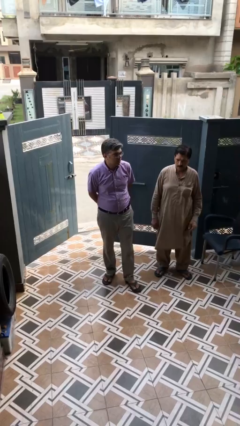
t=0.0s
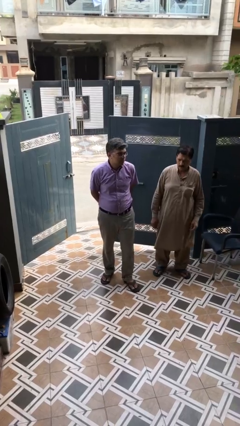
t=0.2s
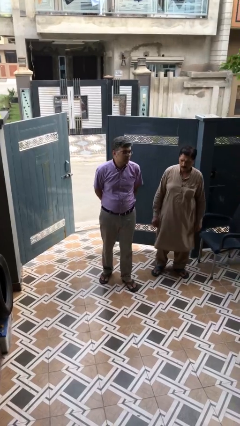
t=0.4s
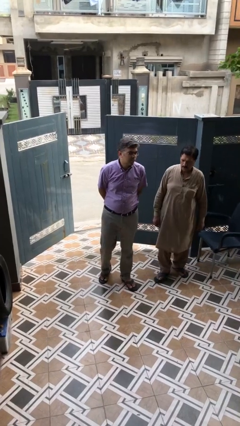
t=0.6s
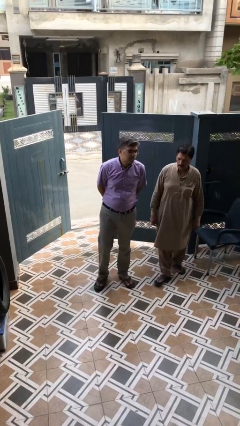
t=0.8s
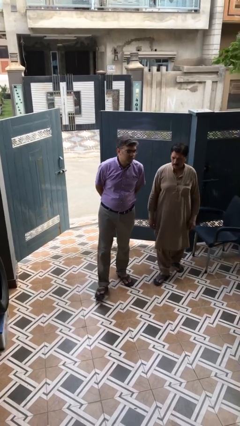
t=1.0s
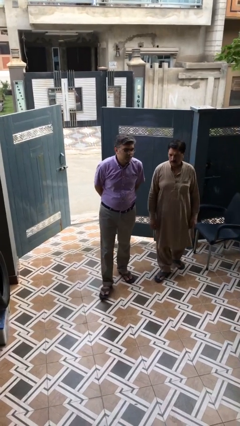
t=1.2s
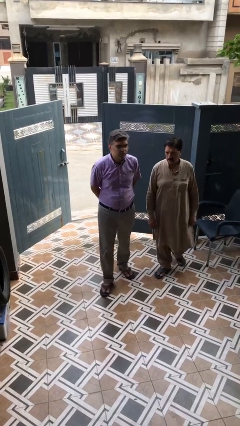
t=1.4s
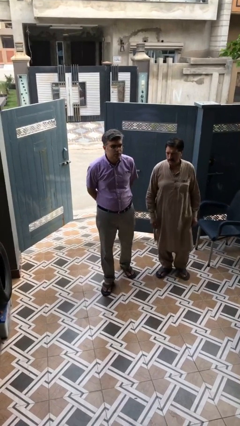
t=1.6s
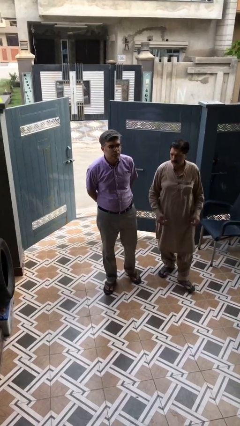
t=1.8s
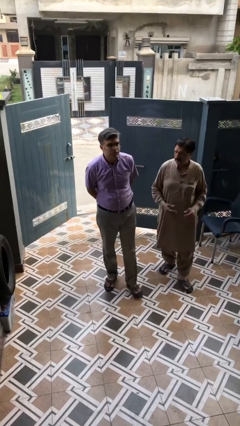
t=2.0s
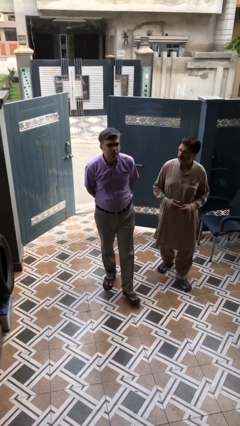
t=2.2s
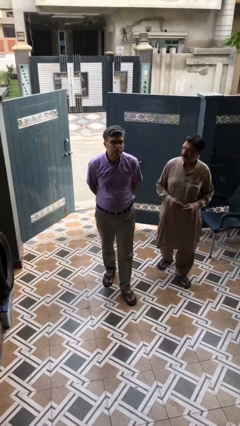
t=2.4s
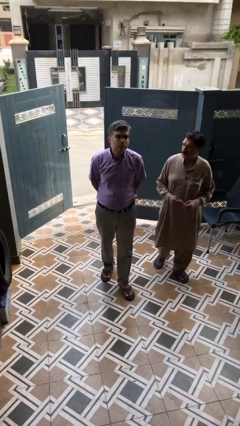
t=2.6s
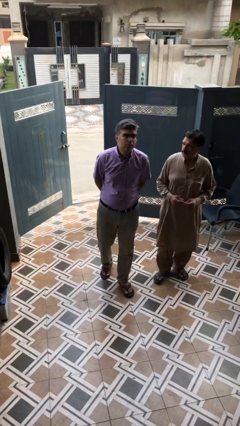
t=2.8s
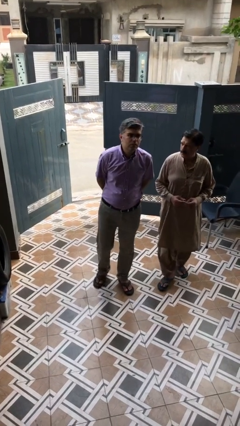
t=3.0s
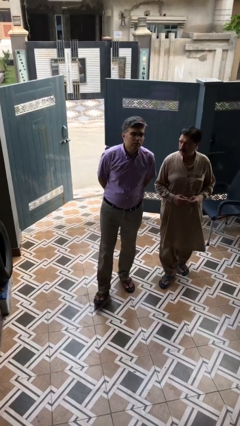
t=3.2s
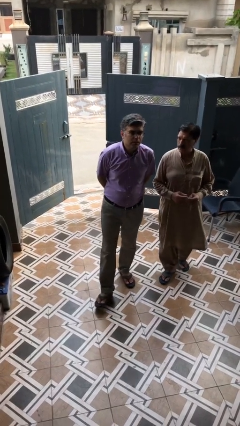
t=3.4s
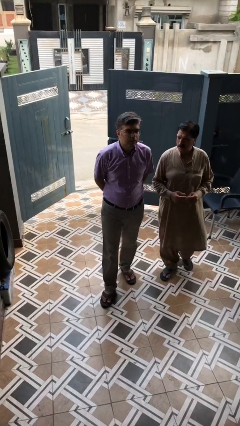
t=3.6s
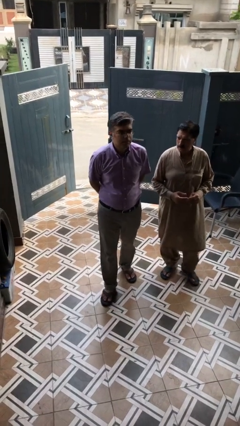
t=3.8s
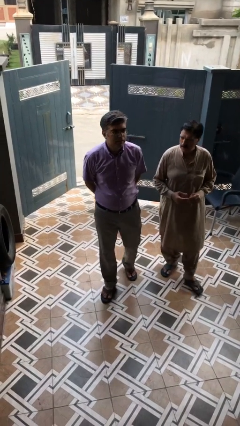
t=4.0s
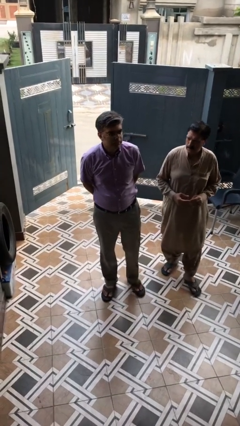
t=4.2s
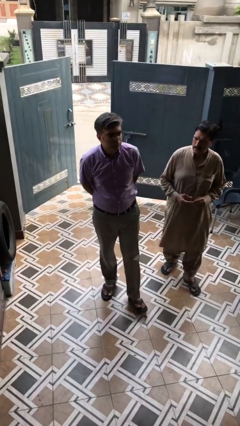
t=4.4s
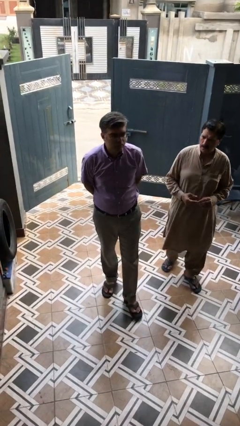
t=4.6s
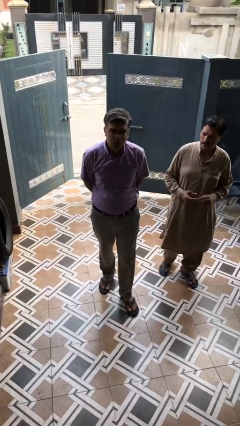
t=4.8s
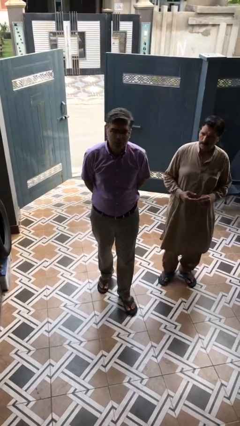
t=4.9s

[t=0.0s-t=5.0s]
person talks to person

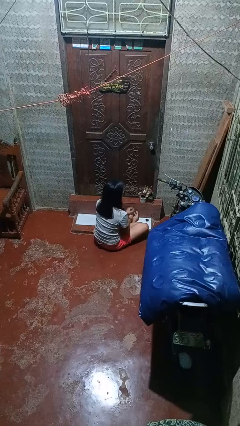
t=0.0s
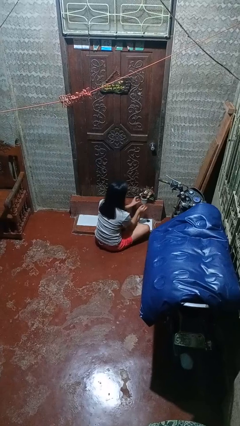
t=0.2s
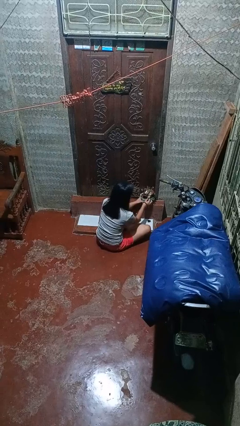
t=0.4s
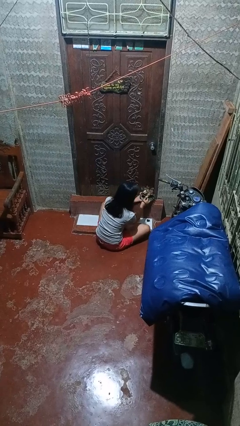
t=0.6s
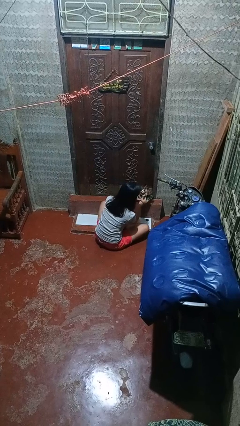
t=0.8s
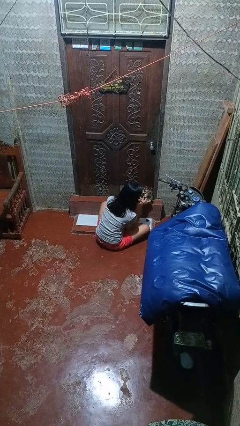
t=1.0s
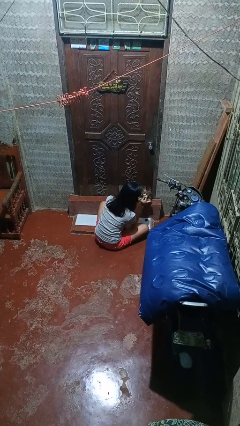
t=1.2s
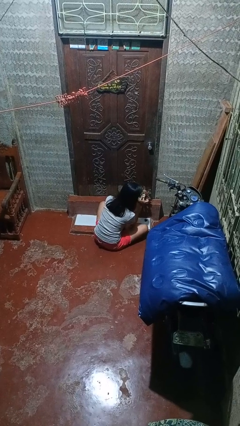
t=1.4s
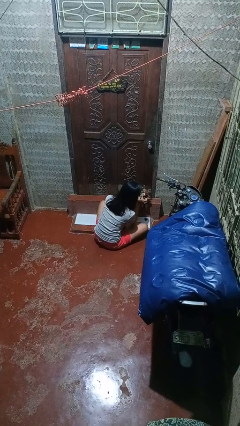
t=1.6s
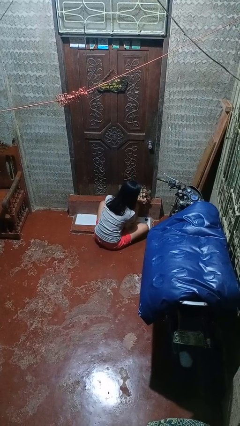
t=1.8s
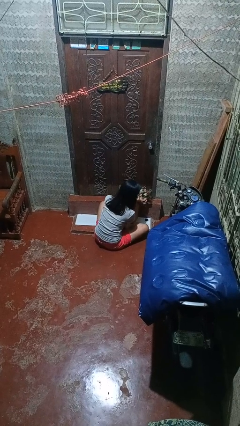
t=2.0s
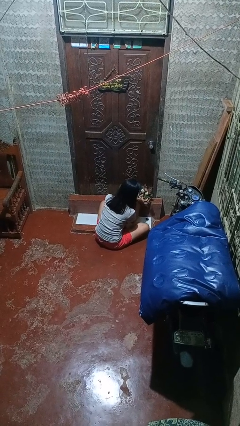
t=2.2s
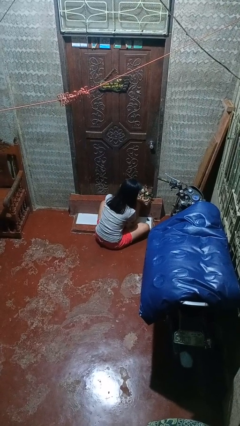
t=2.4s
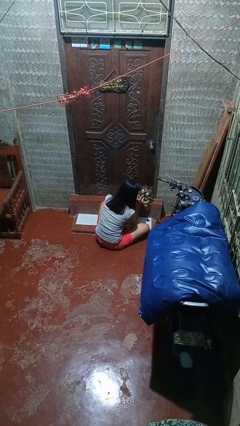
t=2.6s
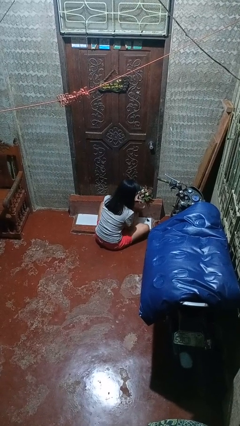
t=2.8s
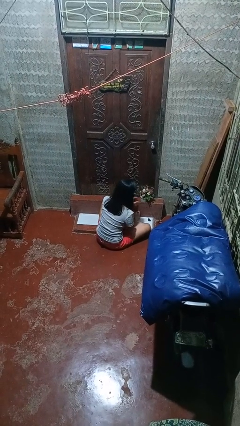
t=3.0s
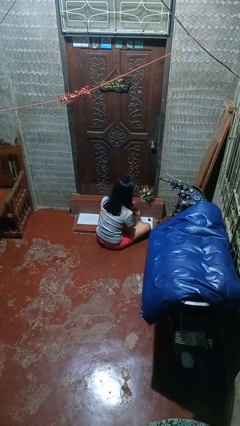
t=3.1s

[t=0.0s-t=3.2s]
person arranges flowers in vase

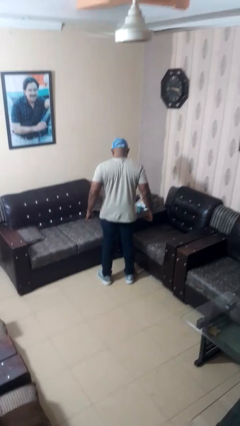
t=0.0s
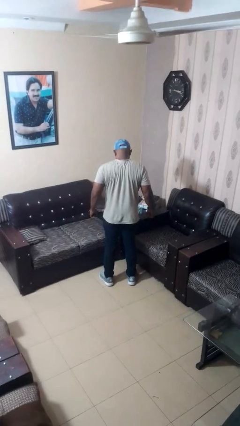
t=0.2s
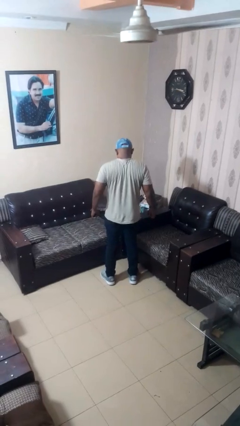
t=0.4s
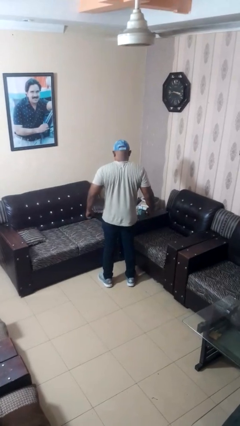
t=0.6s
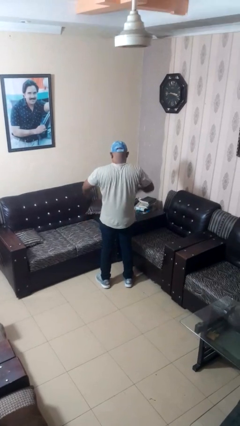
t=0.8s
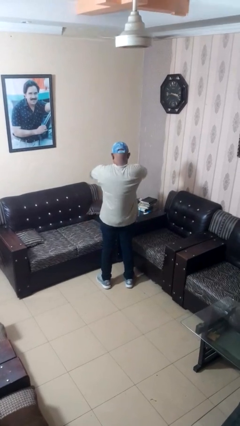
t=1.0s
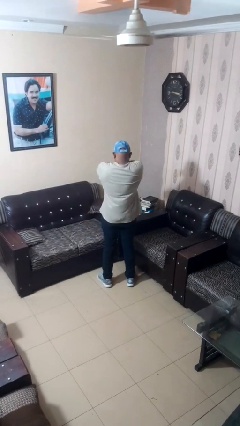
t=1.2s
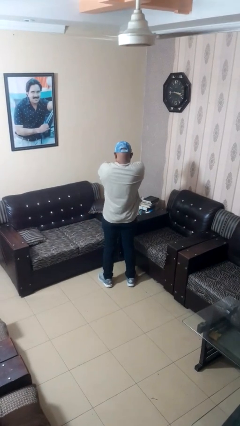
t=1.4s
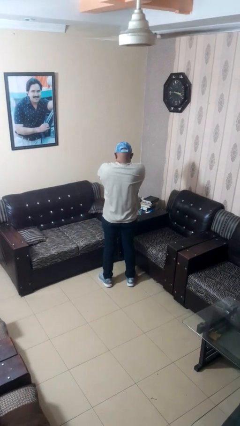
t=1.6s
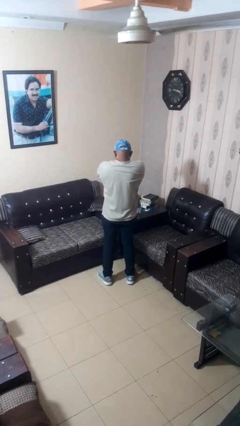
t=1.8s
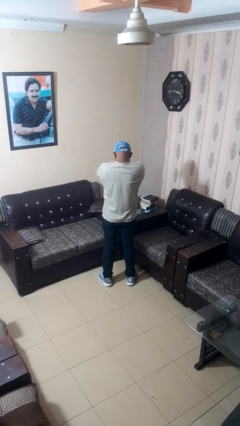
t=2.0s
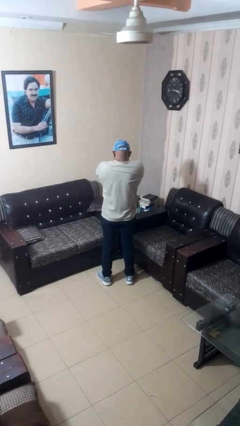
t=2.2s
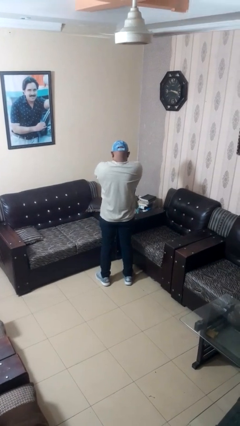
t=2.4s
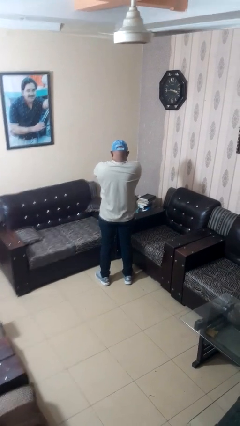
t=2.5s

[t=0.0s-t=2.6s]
person crosses arms

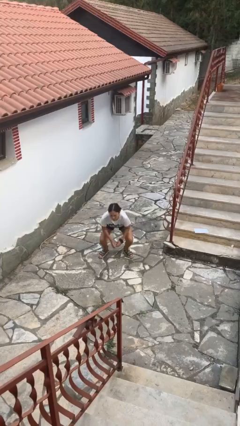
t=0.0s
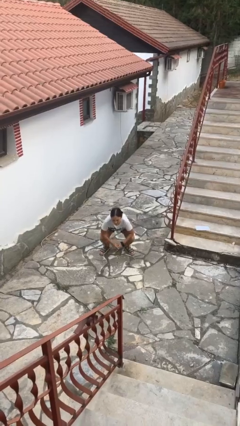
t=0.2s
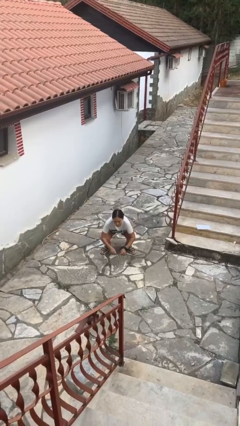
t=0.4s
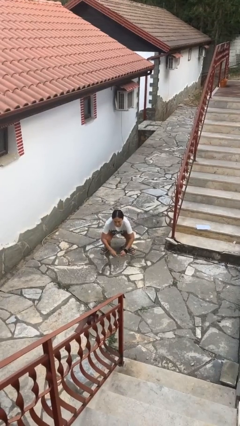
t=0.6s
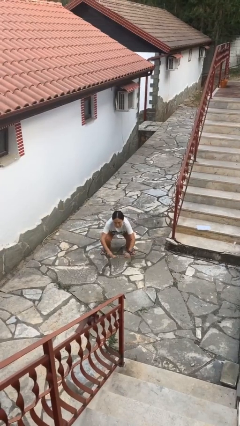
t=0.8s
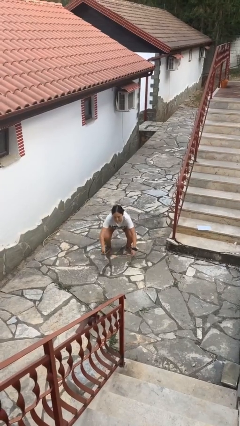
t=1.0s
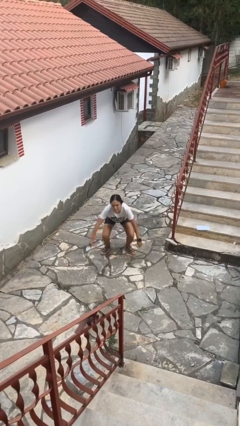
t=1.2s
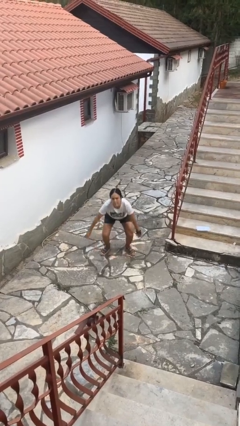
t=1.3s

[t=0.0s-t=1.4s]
person squats

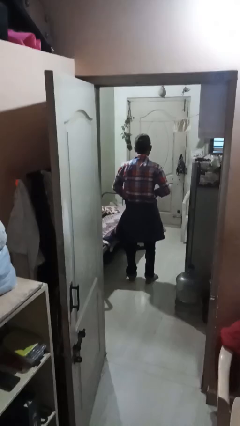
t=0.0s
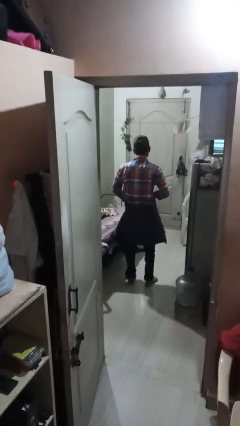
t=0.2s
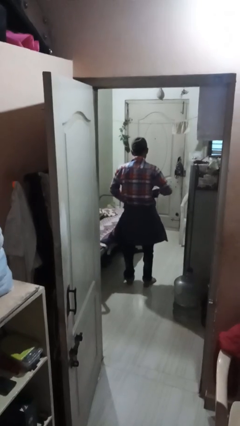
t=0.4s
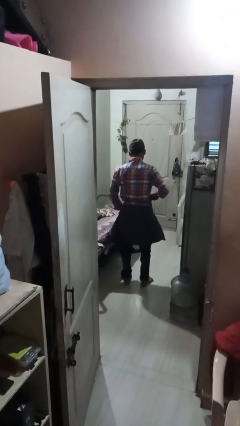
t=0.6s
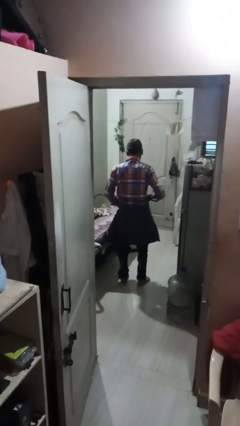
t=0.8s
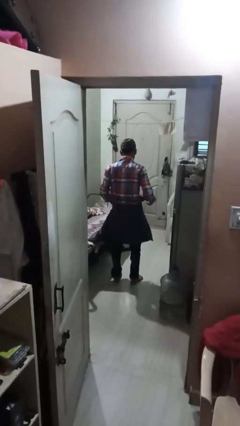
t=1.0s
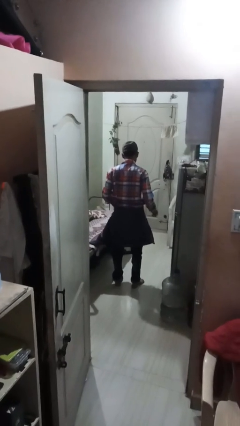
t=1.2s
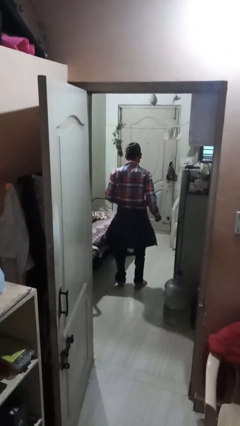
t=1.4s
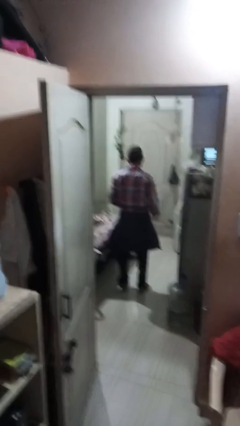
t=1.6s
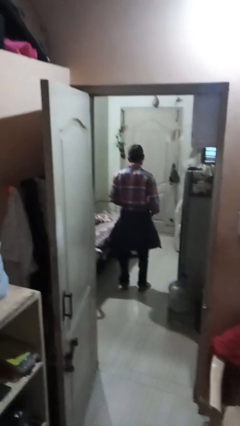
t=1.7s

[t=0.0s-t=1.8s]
person ties jacket around waist

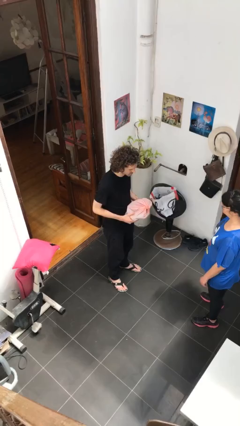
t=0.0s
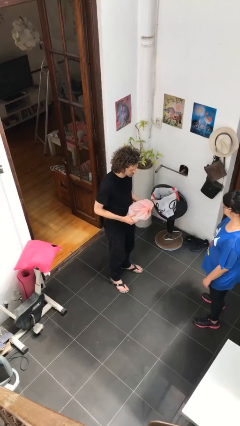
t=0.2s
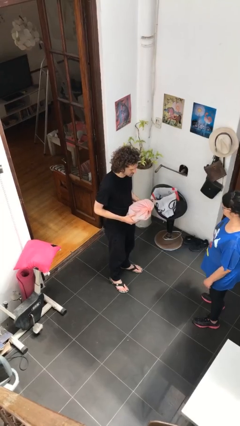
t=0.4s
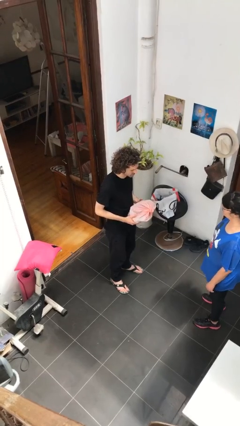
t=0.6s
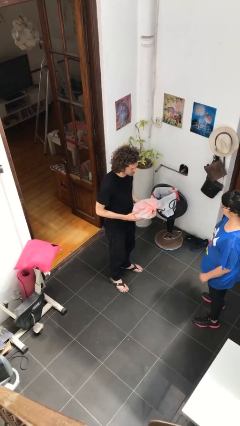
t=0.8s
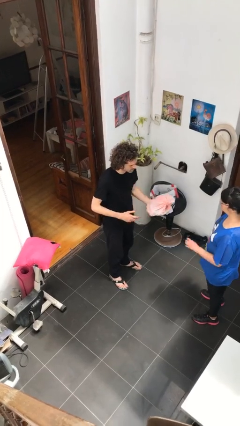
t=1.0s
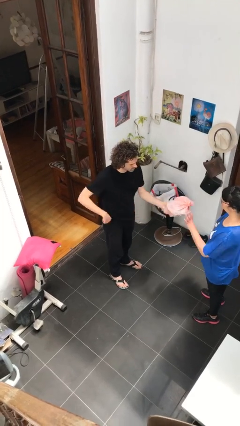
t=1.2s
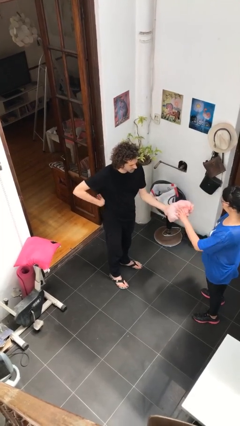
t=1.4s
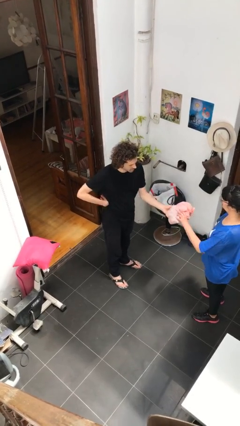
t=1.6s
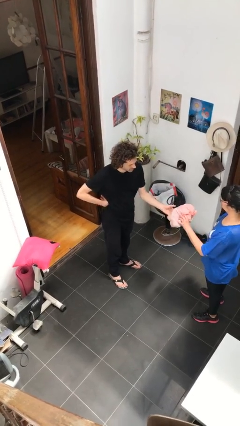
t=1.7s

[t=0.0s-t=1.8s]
person transfers object to person

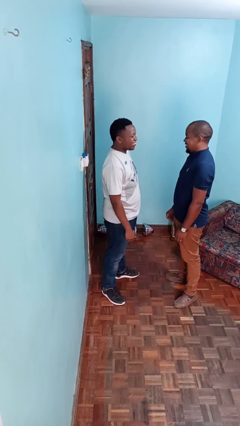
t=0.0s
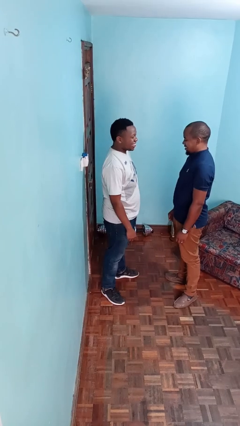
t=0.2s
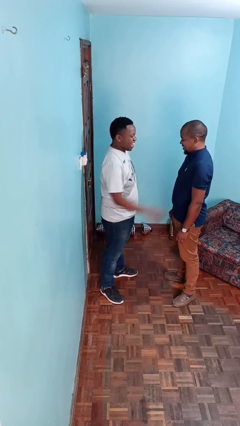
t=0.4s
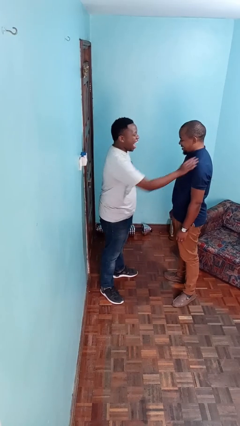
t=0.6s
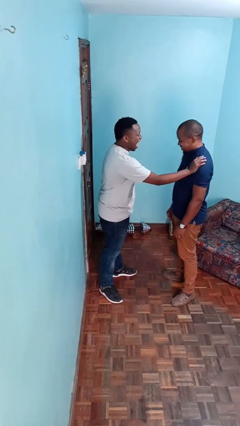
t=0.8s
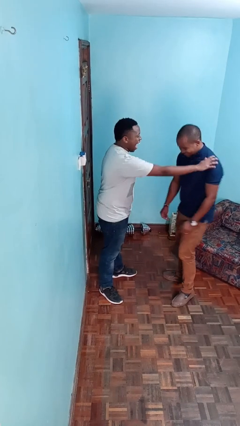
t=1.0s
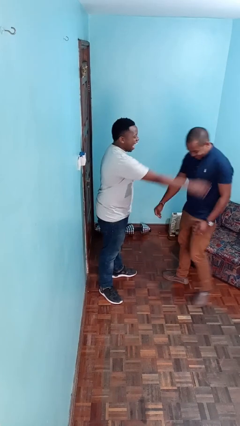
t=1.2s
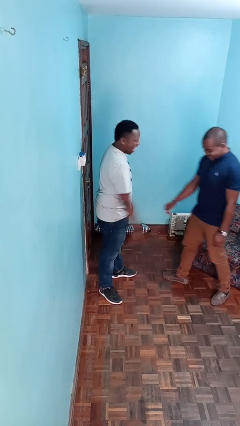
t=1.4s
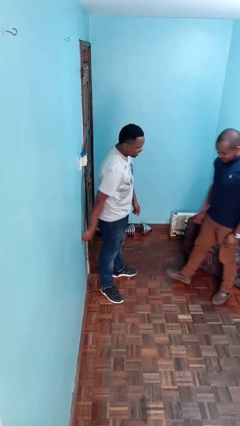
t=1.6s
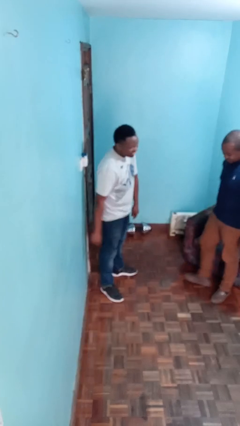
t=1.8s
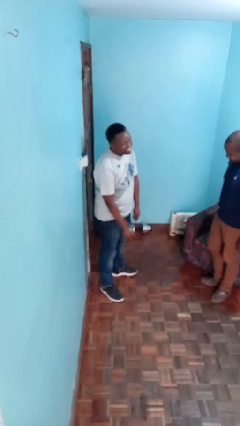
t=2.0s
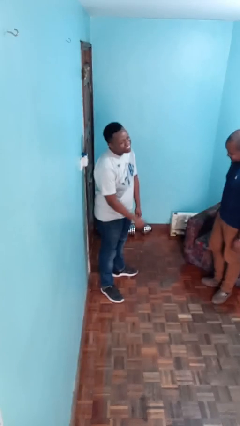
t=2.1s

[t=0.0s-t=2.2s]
person shoves person
